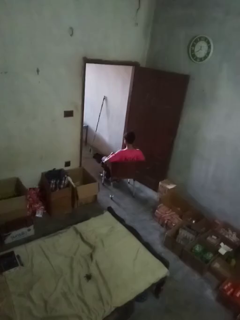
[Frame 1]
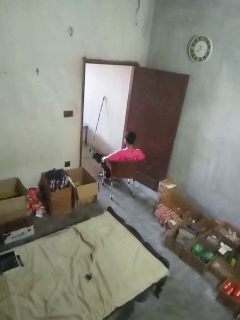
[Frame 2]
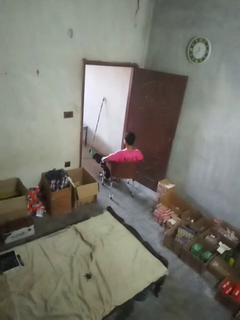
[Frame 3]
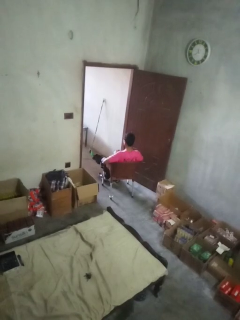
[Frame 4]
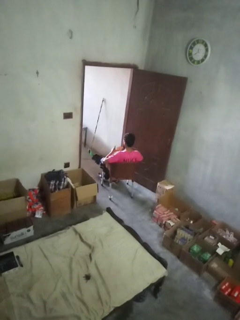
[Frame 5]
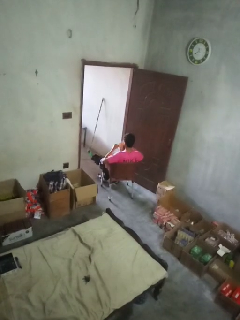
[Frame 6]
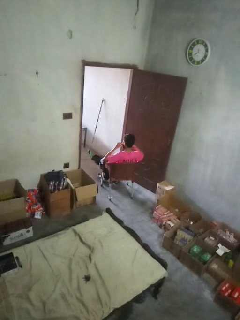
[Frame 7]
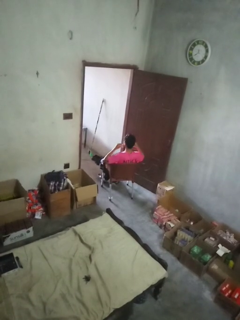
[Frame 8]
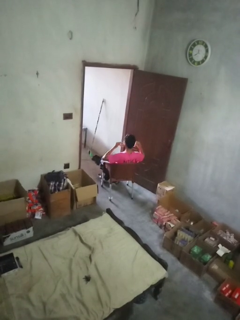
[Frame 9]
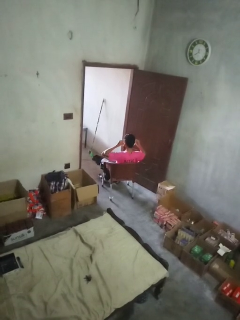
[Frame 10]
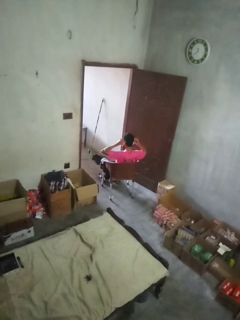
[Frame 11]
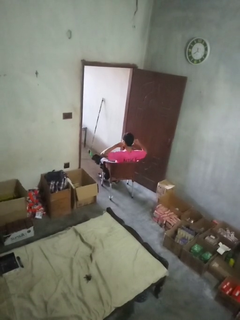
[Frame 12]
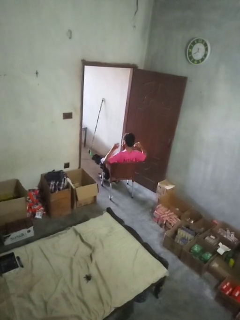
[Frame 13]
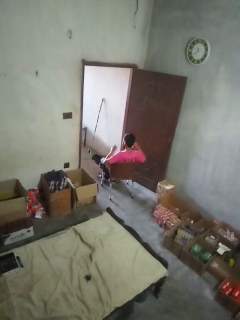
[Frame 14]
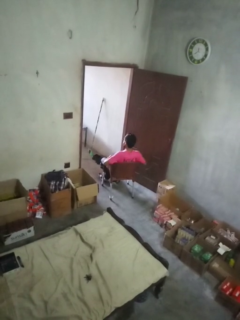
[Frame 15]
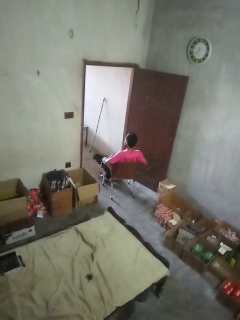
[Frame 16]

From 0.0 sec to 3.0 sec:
person puts on facemask

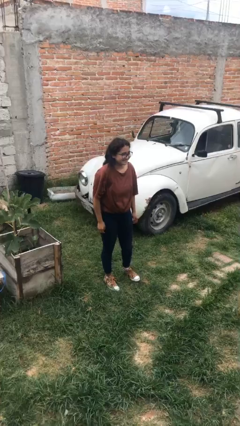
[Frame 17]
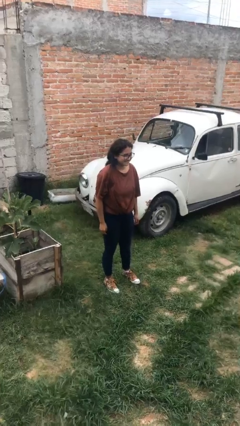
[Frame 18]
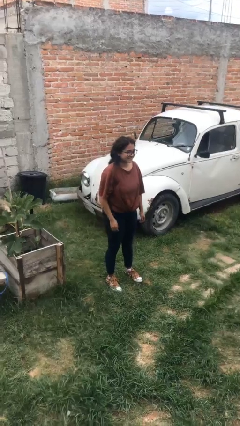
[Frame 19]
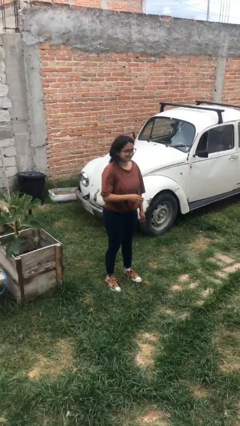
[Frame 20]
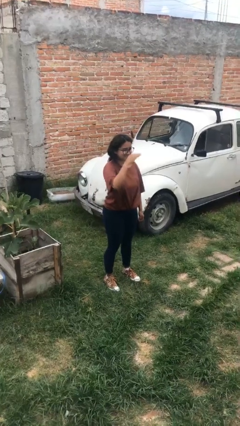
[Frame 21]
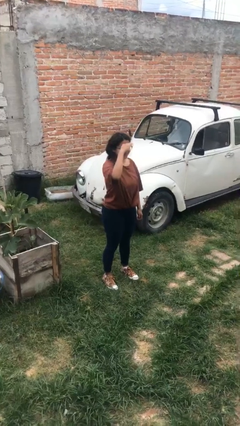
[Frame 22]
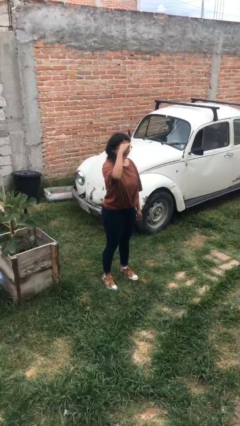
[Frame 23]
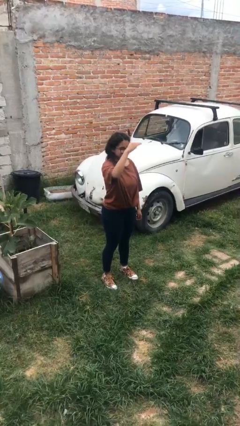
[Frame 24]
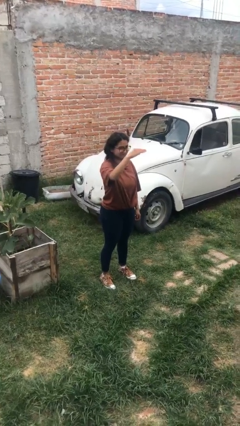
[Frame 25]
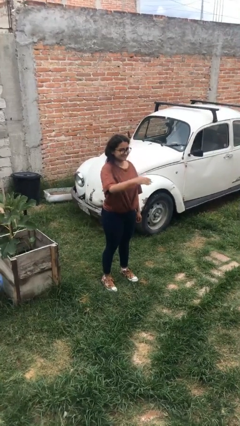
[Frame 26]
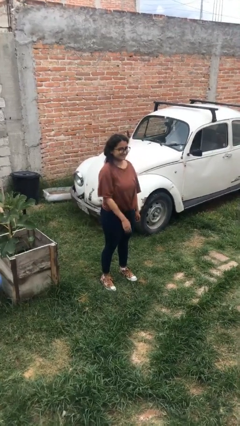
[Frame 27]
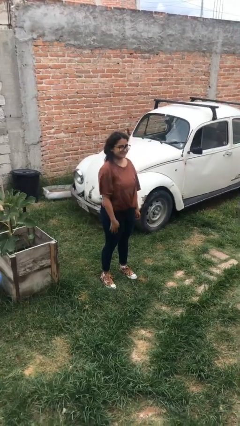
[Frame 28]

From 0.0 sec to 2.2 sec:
person salutes

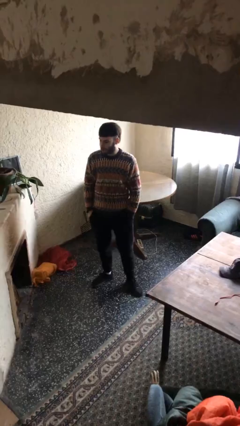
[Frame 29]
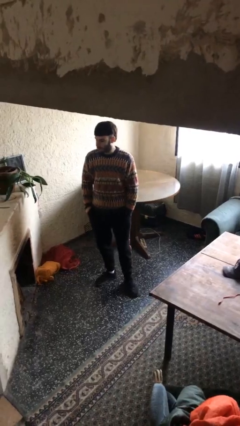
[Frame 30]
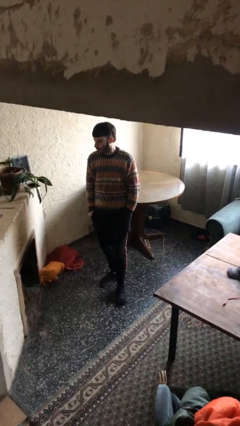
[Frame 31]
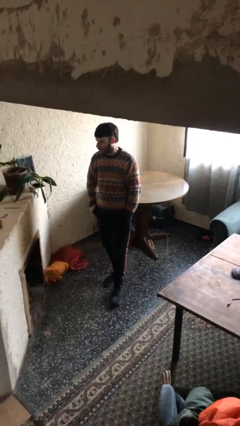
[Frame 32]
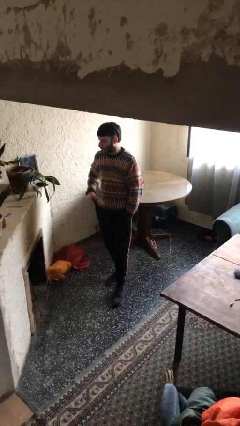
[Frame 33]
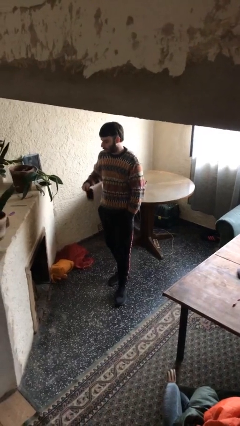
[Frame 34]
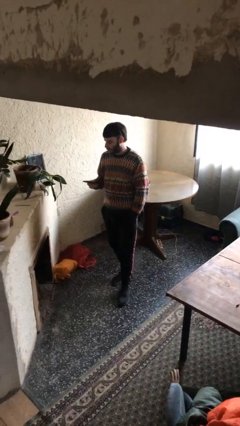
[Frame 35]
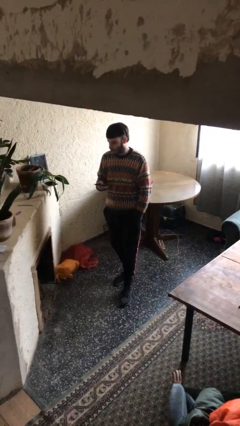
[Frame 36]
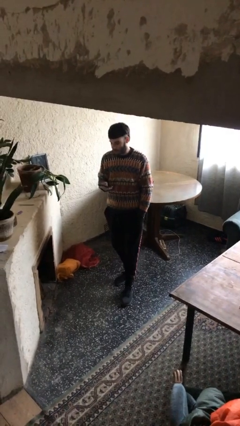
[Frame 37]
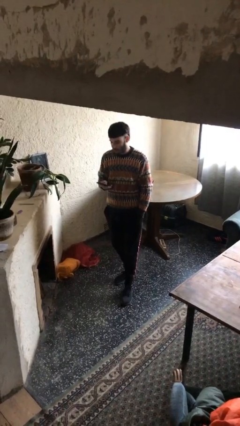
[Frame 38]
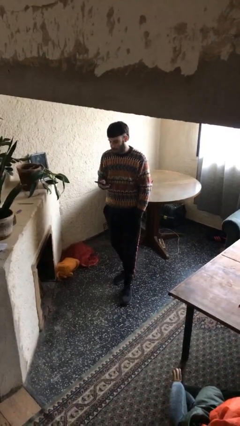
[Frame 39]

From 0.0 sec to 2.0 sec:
person takes phone from pocket

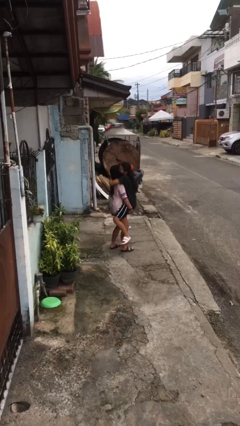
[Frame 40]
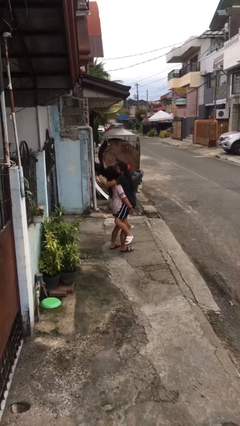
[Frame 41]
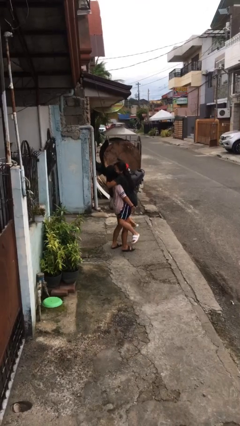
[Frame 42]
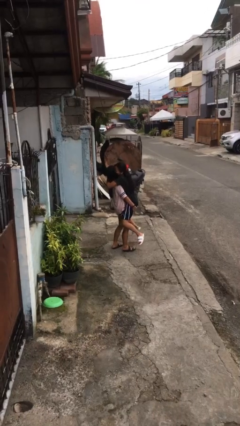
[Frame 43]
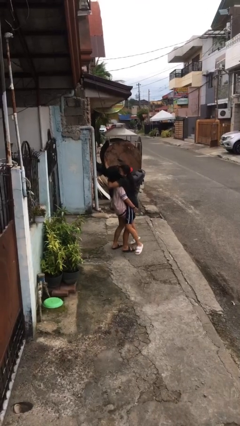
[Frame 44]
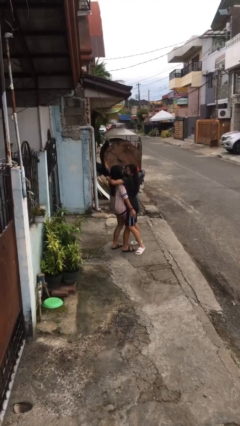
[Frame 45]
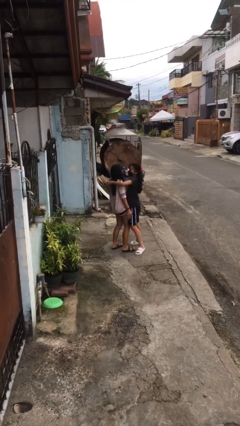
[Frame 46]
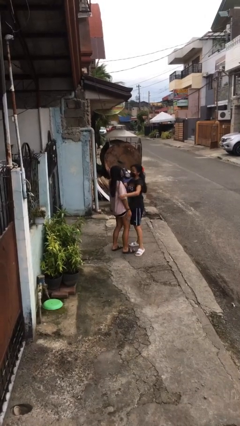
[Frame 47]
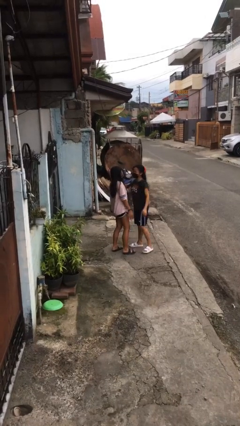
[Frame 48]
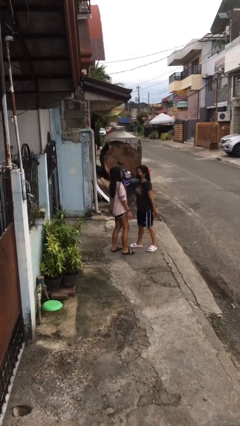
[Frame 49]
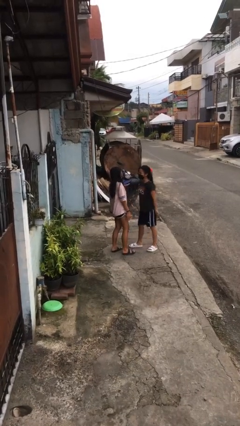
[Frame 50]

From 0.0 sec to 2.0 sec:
person puts down person

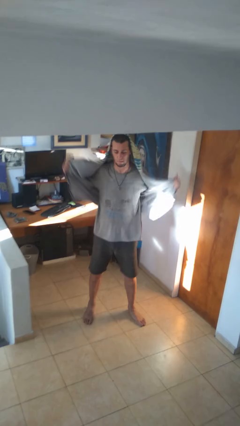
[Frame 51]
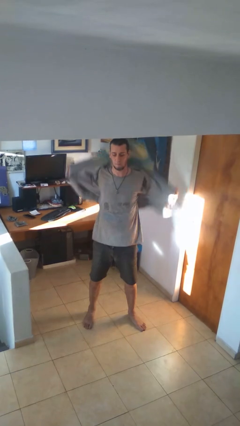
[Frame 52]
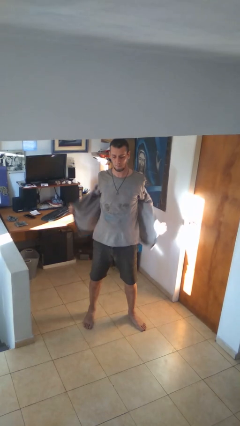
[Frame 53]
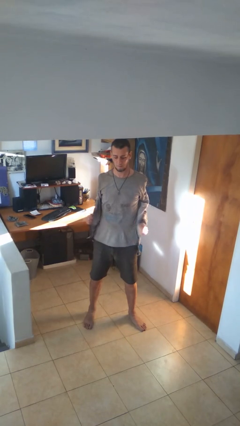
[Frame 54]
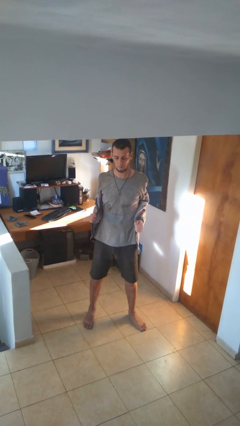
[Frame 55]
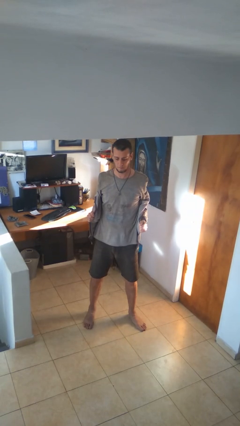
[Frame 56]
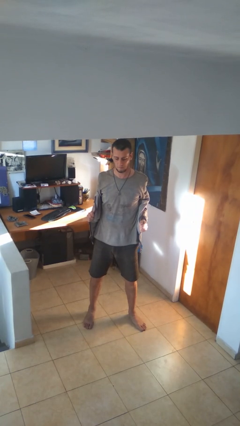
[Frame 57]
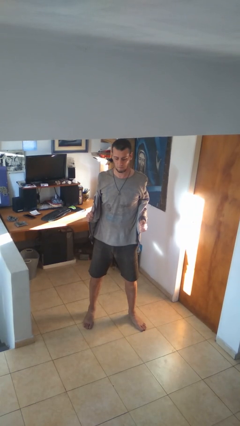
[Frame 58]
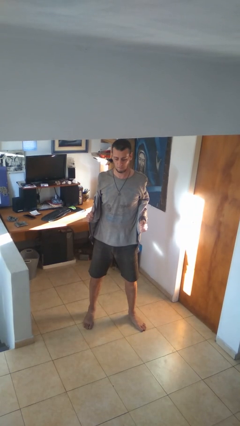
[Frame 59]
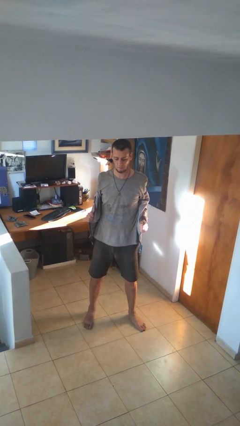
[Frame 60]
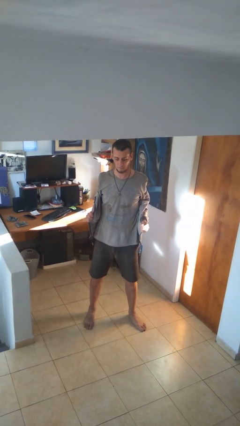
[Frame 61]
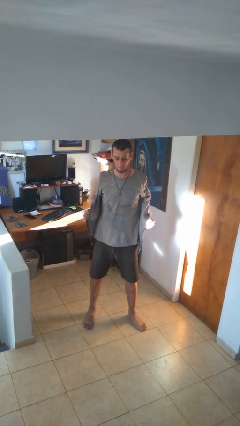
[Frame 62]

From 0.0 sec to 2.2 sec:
person takes off hoodie

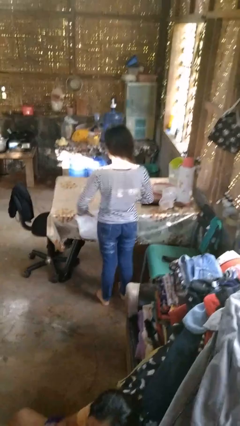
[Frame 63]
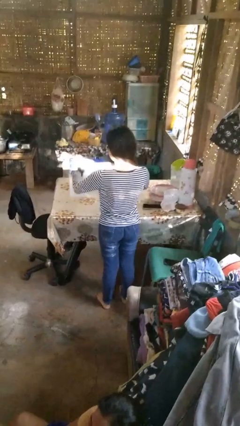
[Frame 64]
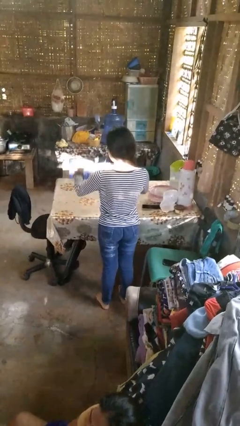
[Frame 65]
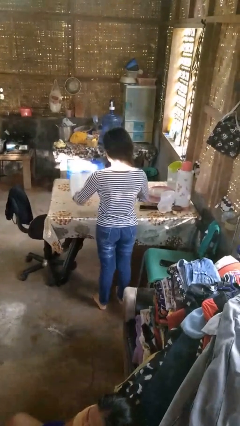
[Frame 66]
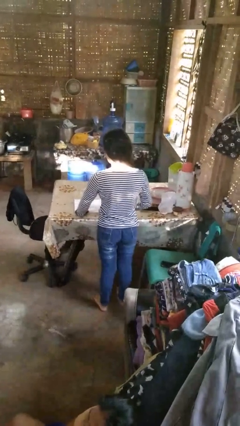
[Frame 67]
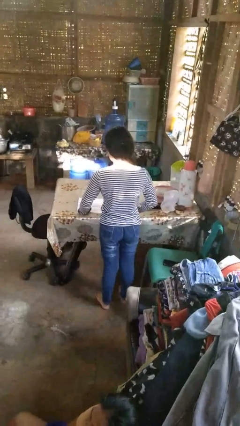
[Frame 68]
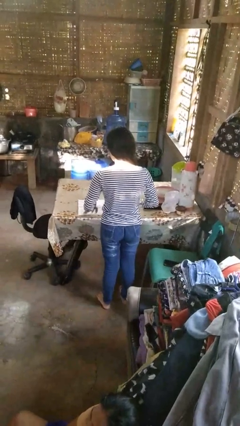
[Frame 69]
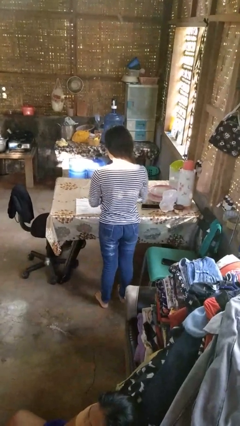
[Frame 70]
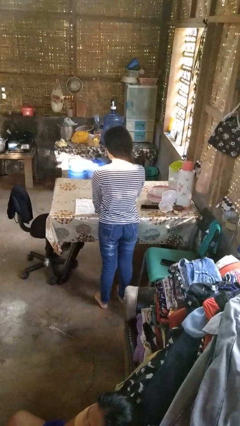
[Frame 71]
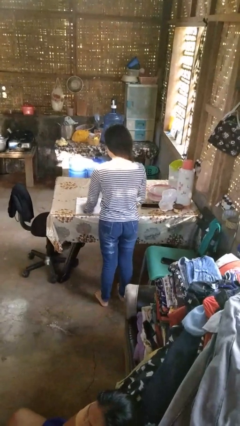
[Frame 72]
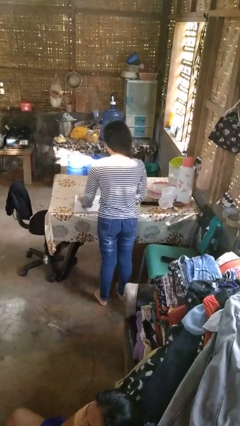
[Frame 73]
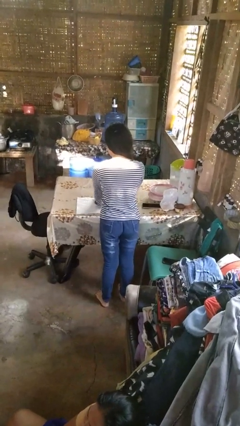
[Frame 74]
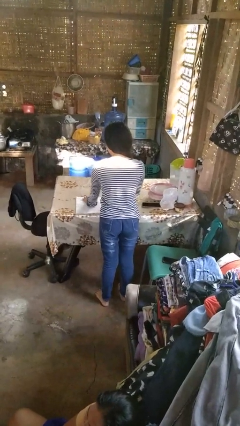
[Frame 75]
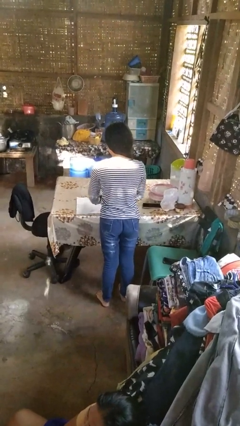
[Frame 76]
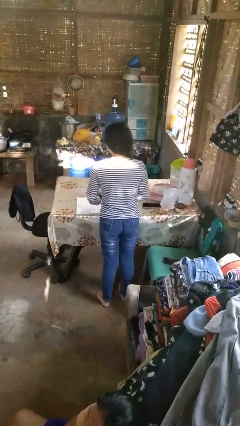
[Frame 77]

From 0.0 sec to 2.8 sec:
person spreads tablecloth

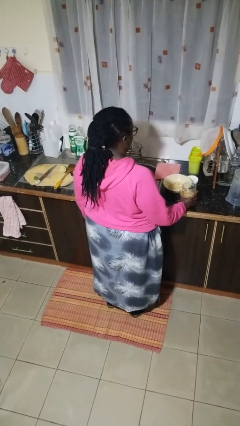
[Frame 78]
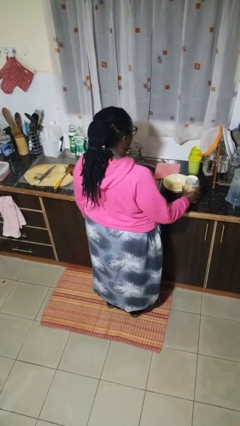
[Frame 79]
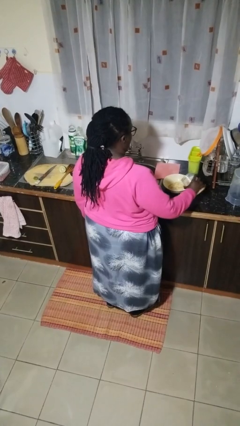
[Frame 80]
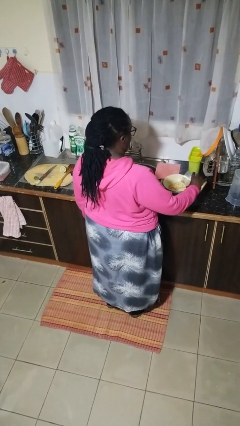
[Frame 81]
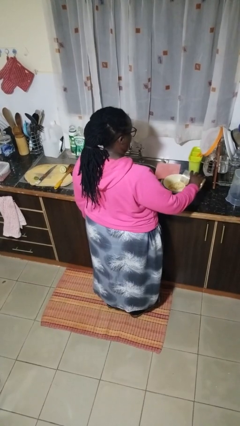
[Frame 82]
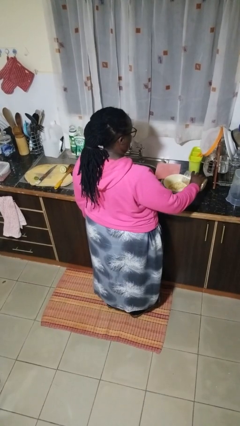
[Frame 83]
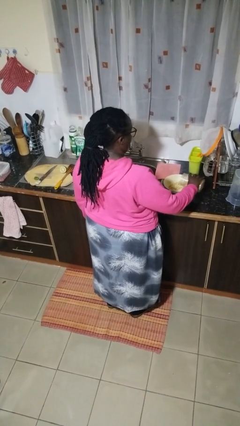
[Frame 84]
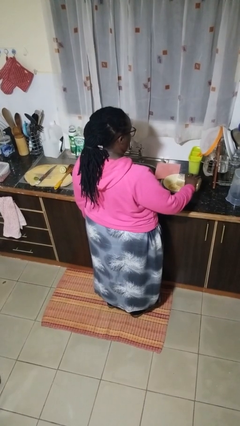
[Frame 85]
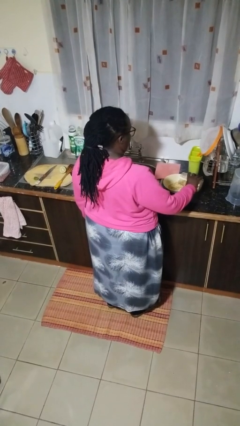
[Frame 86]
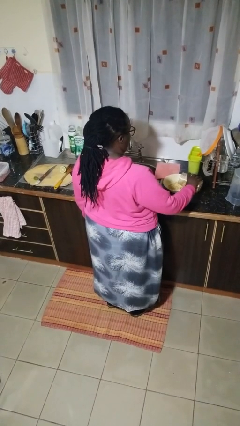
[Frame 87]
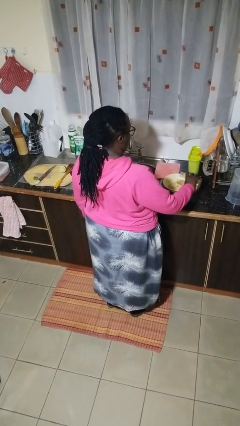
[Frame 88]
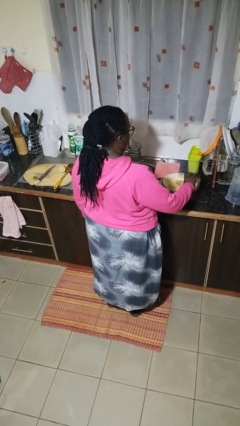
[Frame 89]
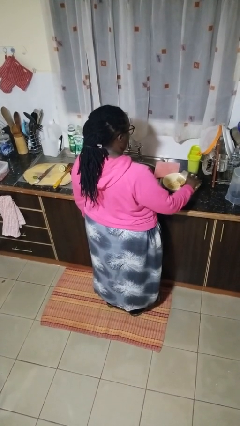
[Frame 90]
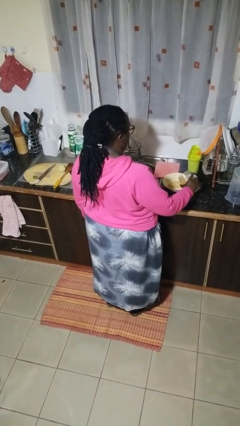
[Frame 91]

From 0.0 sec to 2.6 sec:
person pours into bowl

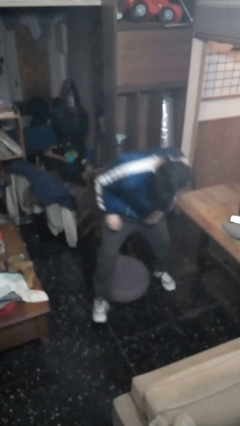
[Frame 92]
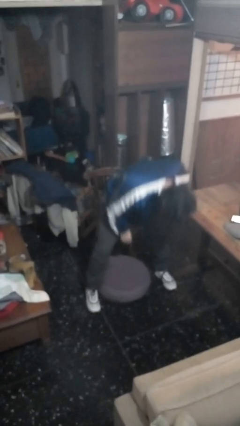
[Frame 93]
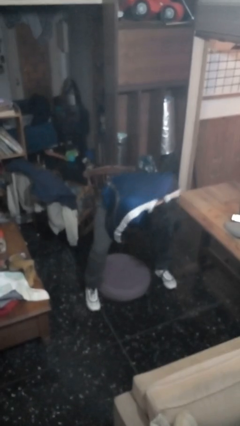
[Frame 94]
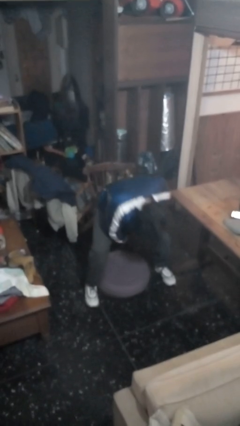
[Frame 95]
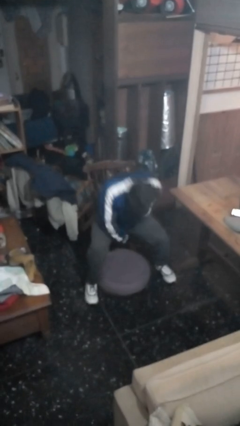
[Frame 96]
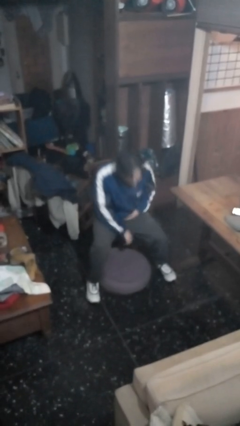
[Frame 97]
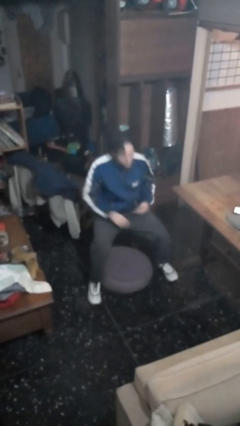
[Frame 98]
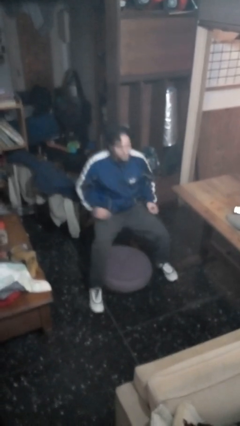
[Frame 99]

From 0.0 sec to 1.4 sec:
person sits down
